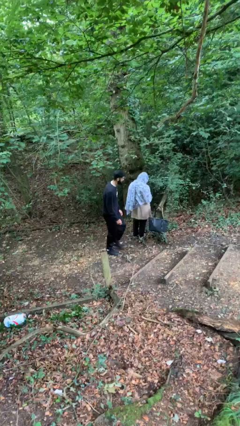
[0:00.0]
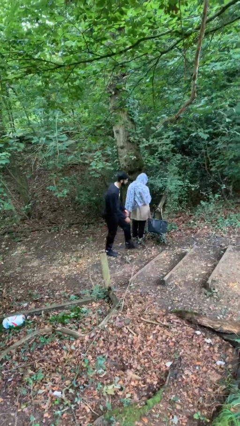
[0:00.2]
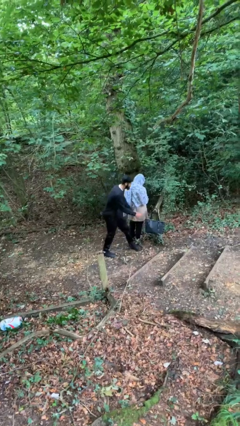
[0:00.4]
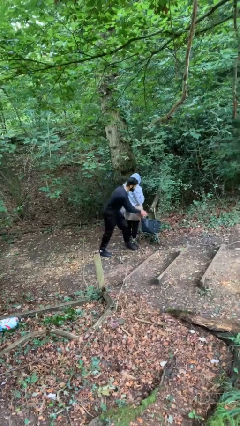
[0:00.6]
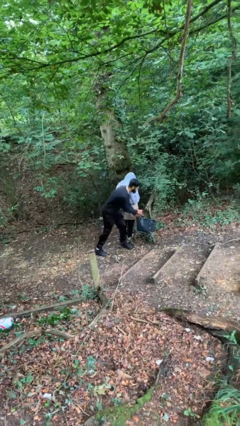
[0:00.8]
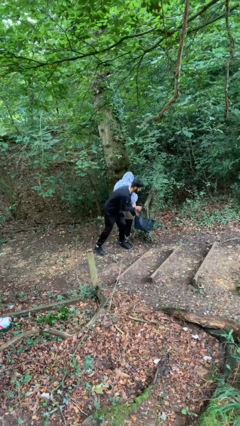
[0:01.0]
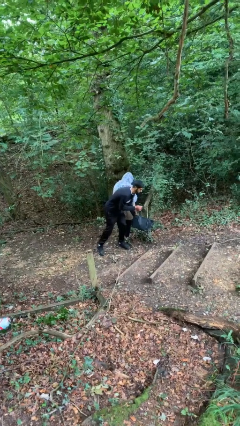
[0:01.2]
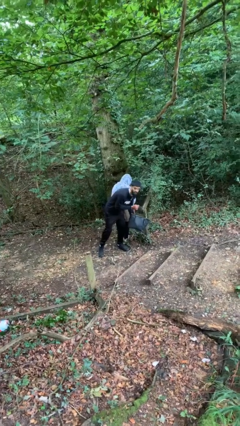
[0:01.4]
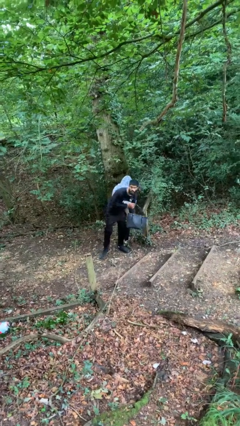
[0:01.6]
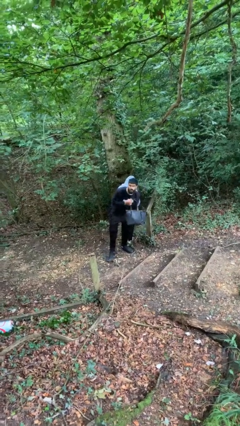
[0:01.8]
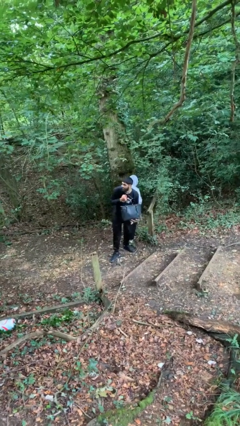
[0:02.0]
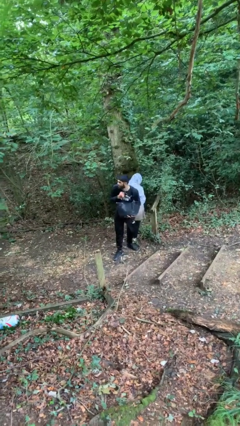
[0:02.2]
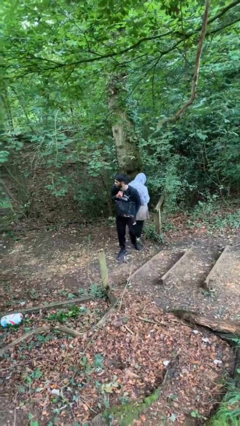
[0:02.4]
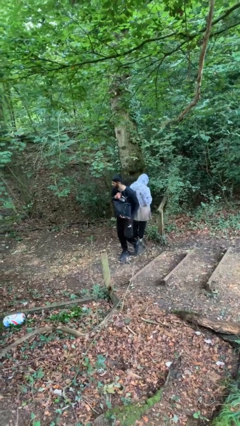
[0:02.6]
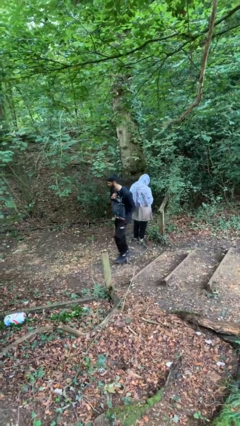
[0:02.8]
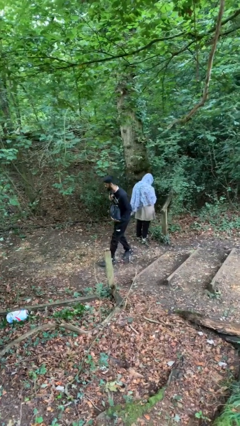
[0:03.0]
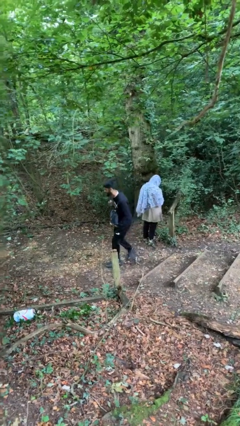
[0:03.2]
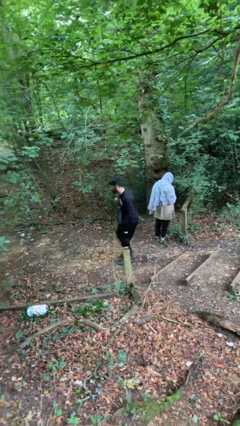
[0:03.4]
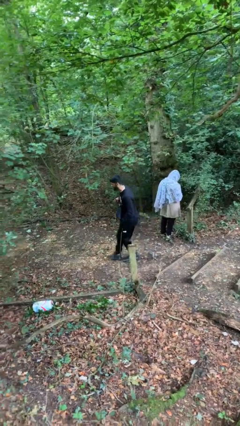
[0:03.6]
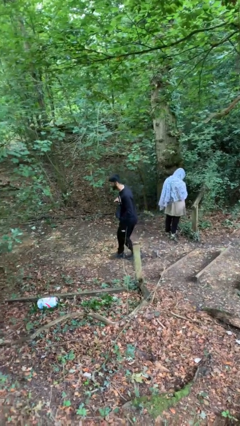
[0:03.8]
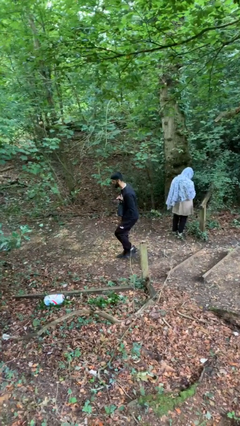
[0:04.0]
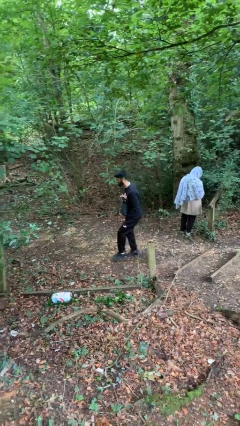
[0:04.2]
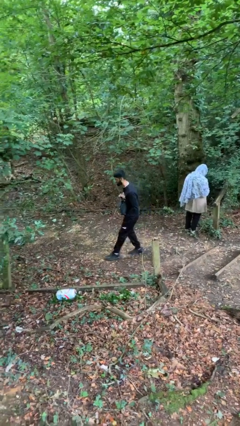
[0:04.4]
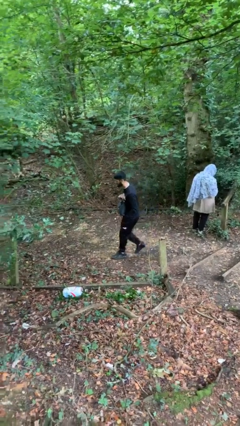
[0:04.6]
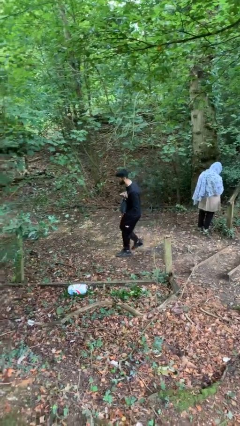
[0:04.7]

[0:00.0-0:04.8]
person steals object from person

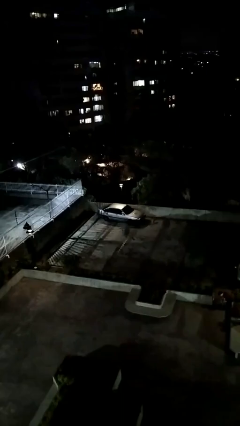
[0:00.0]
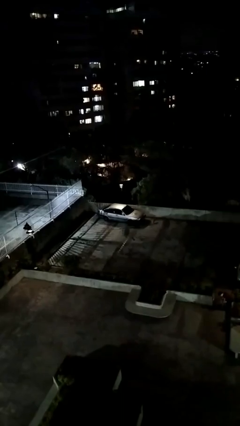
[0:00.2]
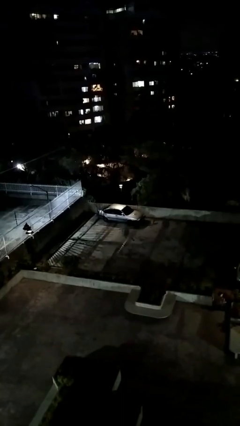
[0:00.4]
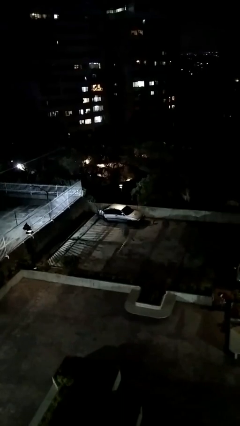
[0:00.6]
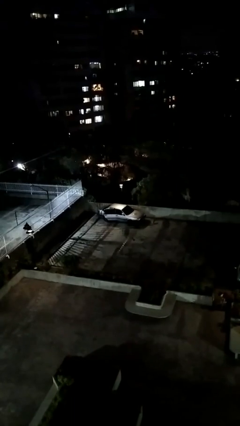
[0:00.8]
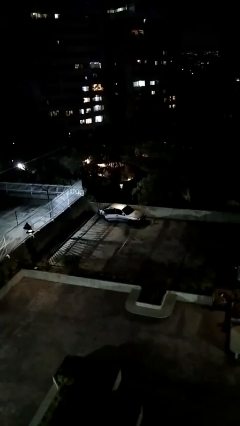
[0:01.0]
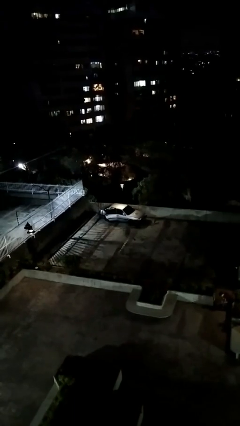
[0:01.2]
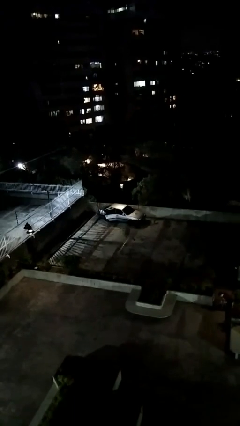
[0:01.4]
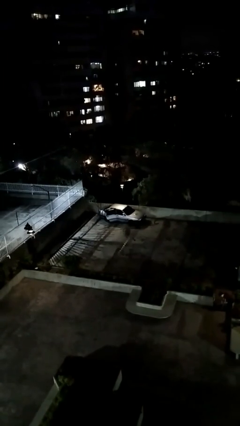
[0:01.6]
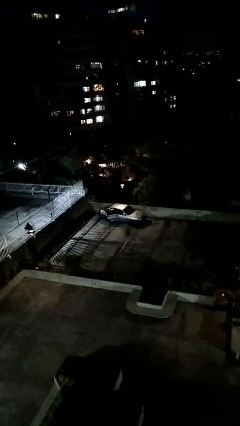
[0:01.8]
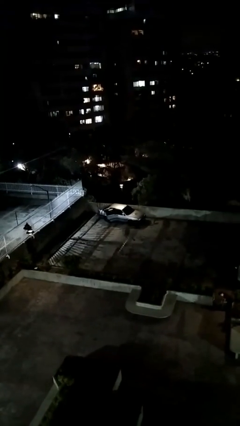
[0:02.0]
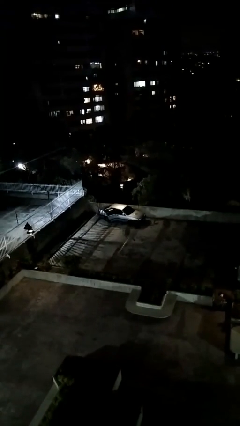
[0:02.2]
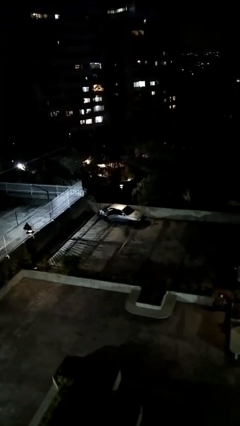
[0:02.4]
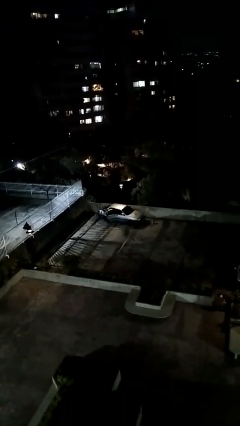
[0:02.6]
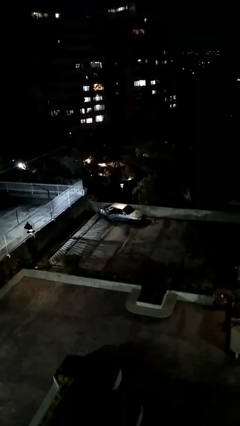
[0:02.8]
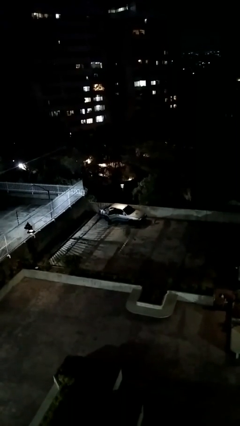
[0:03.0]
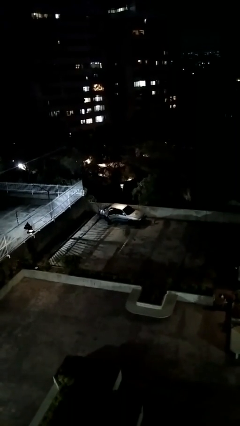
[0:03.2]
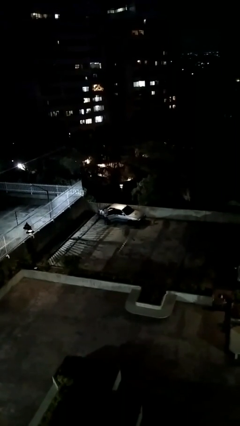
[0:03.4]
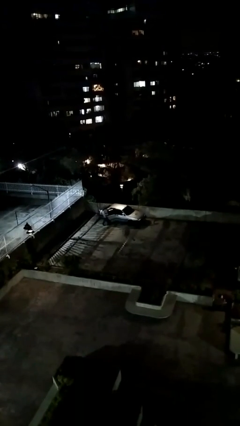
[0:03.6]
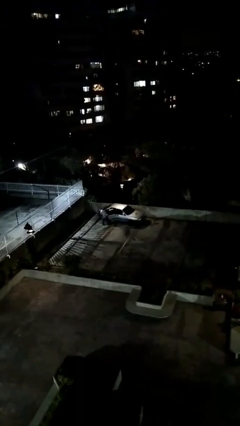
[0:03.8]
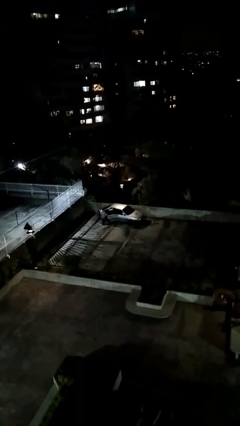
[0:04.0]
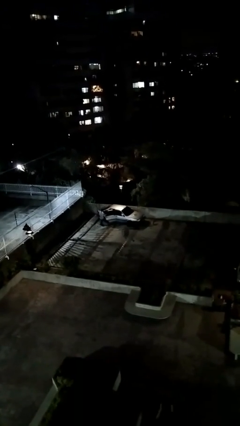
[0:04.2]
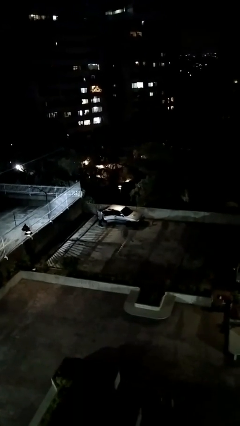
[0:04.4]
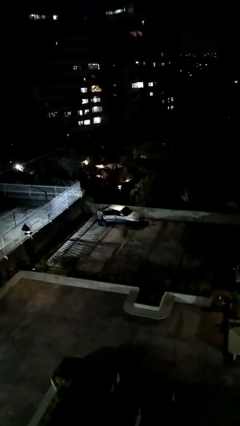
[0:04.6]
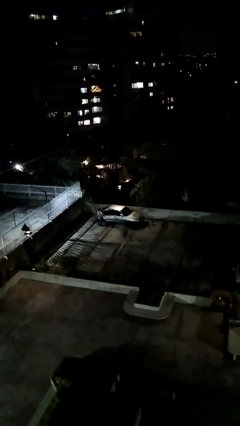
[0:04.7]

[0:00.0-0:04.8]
car drops off person

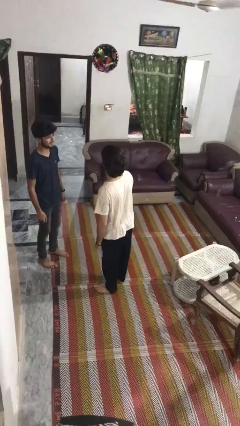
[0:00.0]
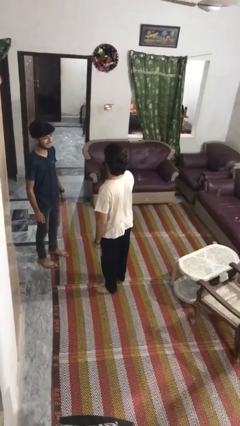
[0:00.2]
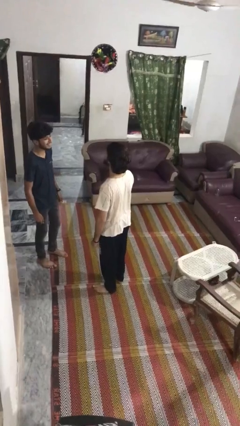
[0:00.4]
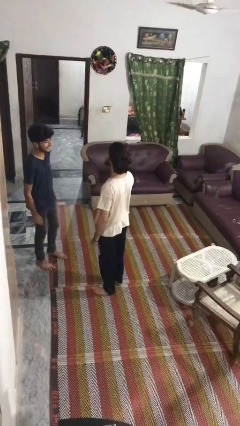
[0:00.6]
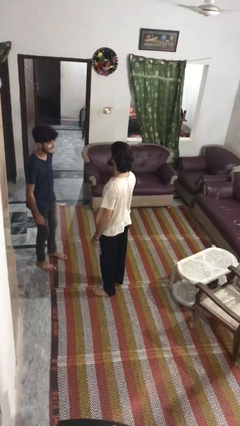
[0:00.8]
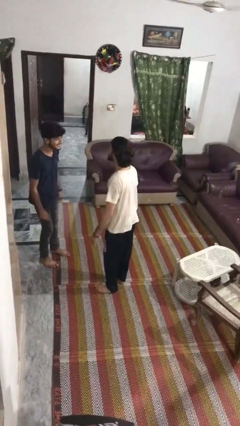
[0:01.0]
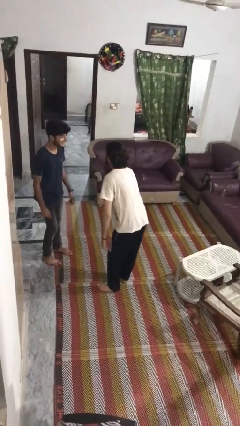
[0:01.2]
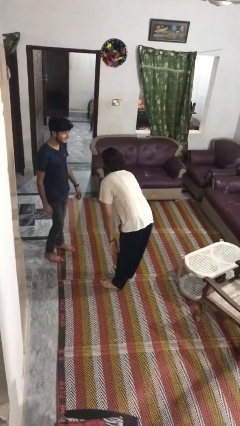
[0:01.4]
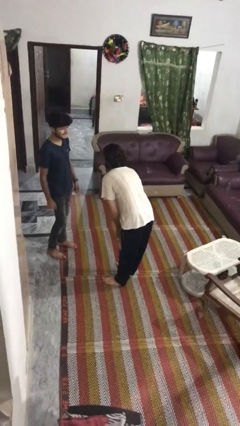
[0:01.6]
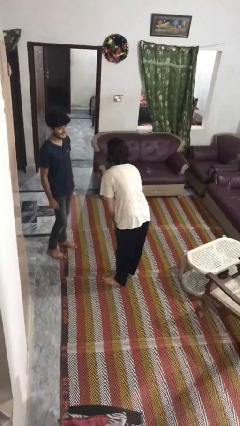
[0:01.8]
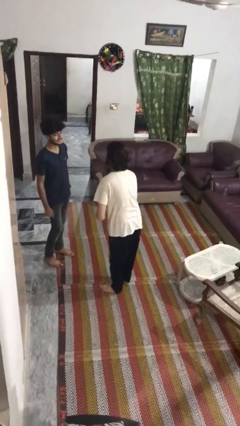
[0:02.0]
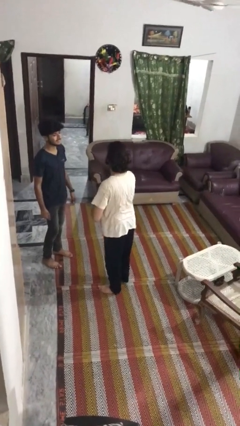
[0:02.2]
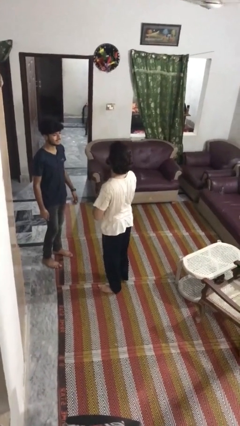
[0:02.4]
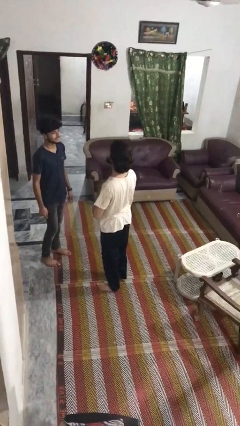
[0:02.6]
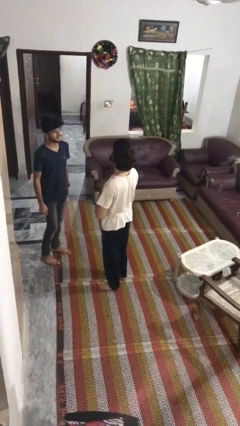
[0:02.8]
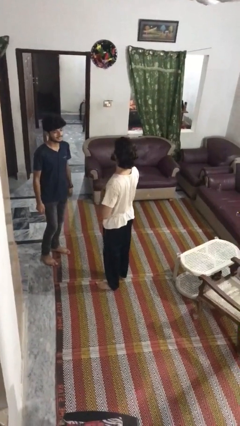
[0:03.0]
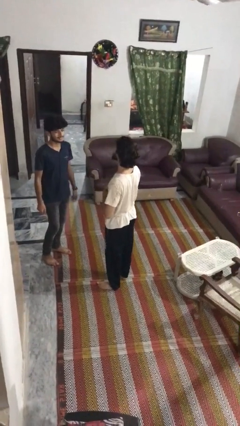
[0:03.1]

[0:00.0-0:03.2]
person laughs with person

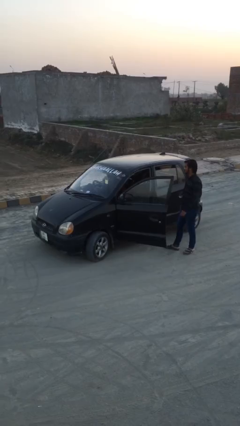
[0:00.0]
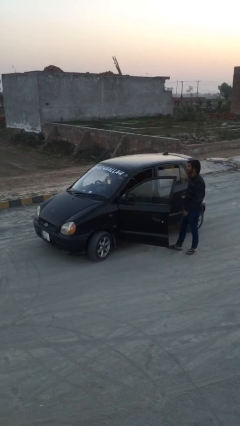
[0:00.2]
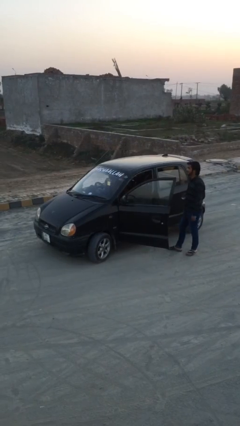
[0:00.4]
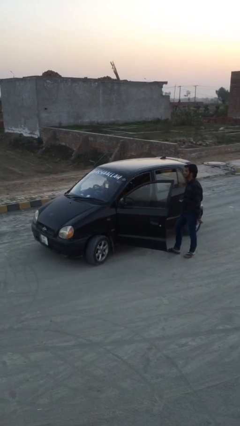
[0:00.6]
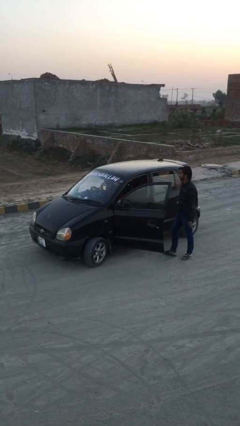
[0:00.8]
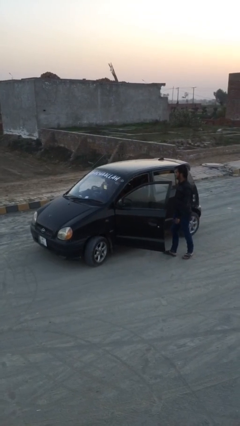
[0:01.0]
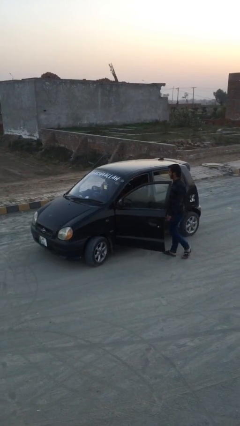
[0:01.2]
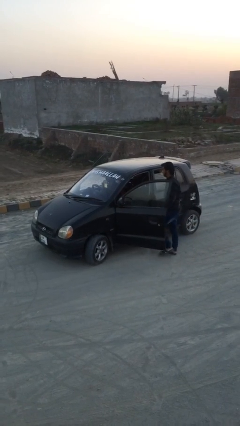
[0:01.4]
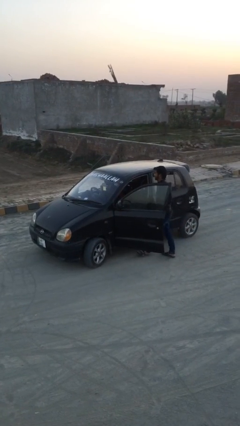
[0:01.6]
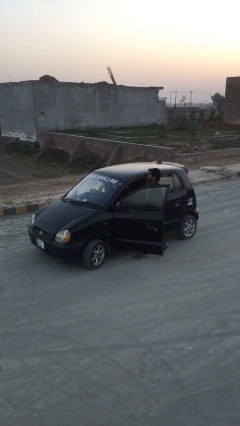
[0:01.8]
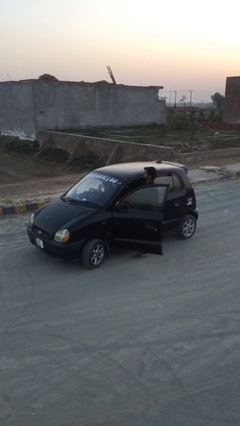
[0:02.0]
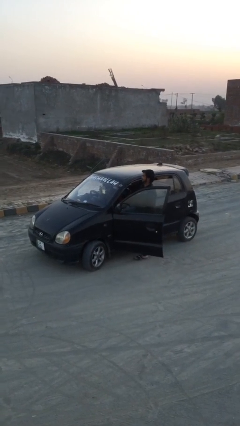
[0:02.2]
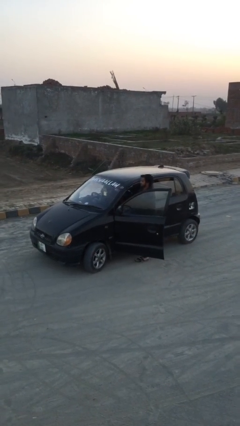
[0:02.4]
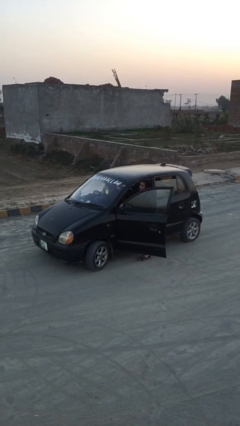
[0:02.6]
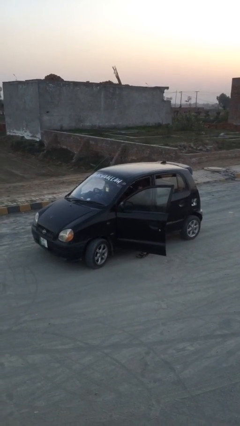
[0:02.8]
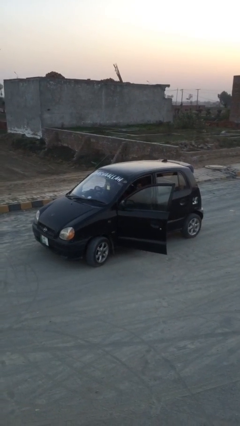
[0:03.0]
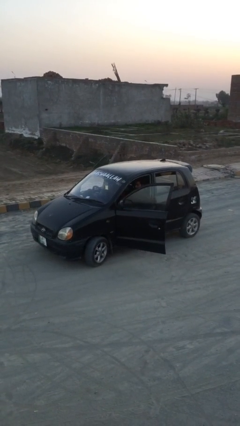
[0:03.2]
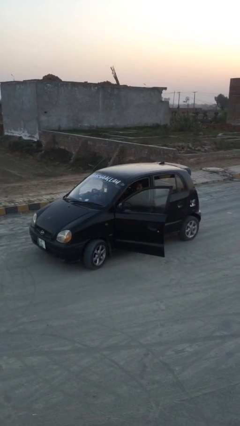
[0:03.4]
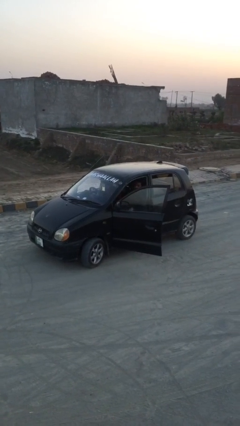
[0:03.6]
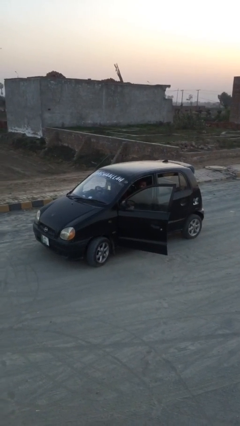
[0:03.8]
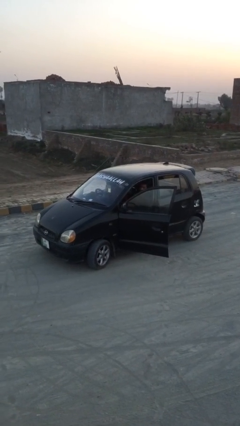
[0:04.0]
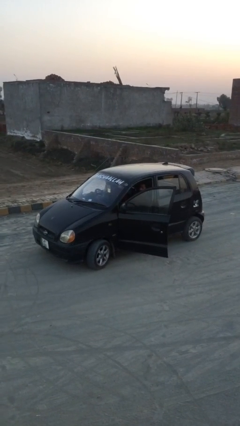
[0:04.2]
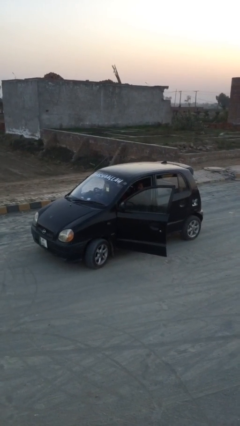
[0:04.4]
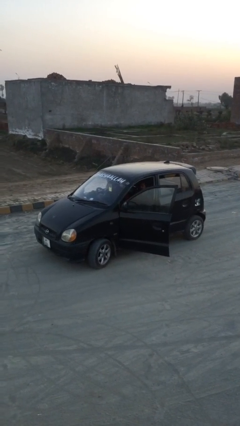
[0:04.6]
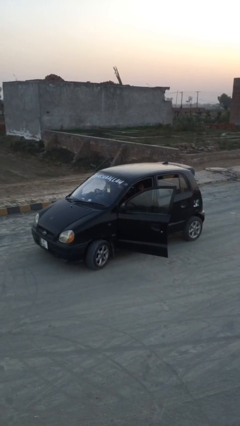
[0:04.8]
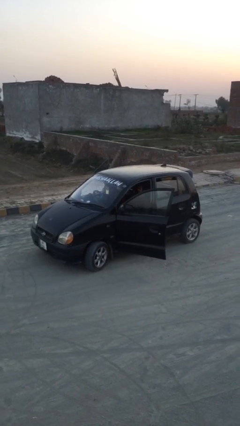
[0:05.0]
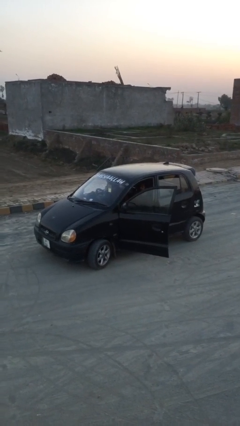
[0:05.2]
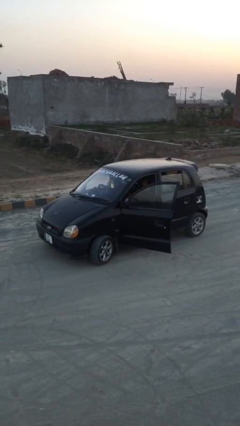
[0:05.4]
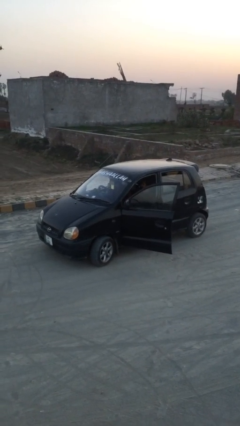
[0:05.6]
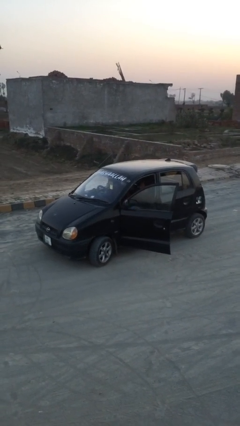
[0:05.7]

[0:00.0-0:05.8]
car picks up person
